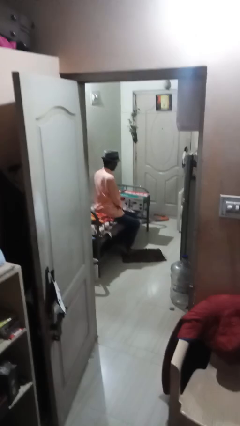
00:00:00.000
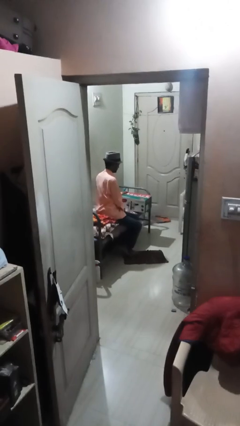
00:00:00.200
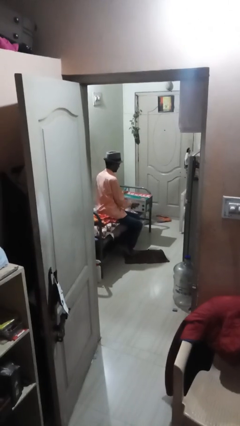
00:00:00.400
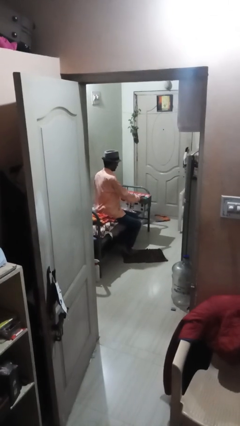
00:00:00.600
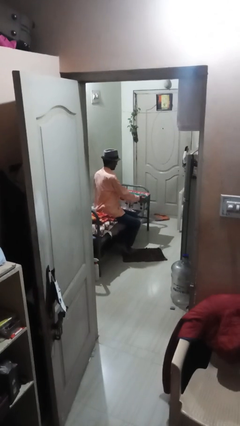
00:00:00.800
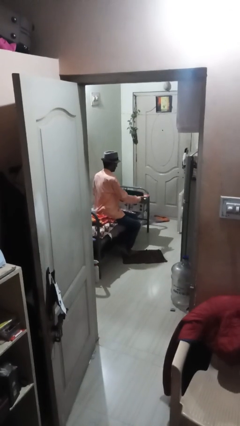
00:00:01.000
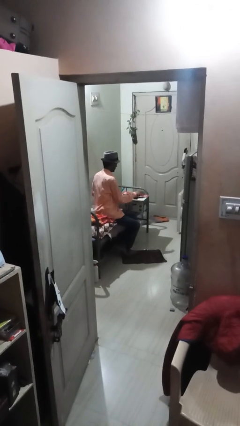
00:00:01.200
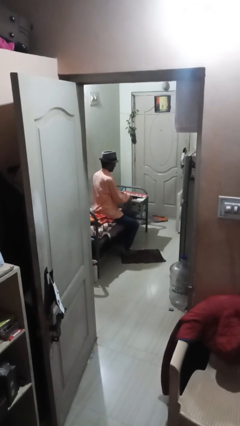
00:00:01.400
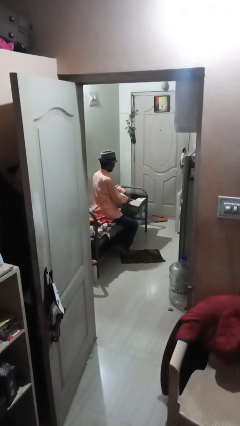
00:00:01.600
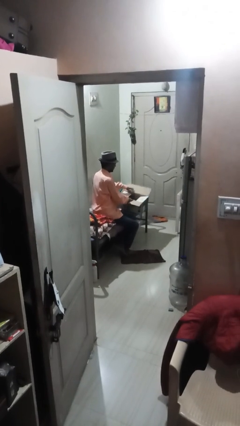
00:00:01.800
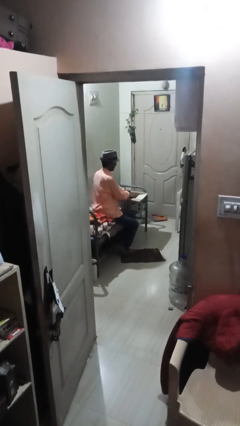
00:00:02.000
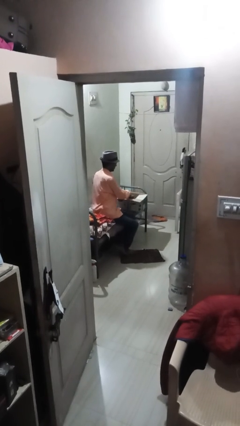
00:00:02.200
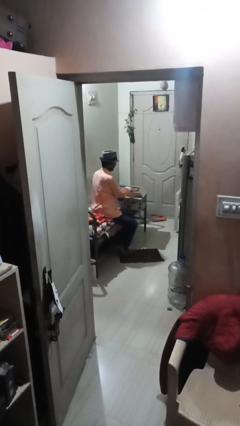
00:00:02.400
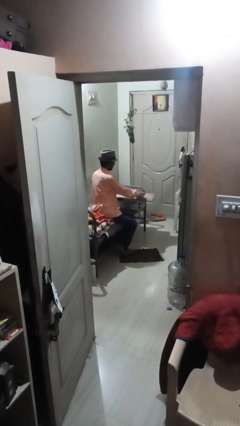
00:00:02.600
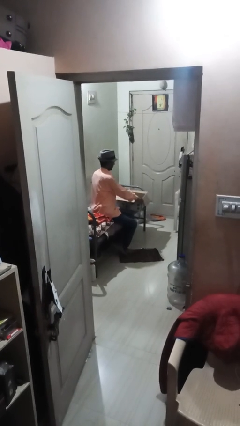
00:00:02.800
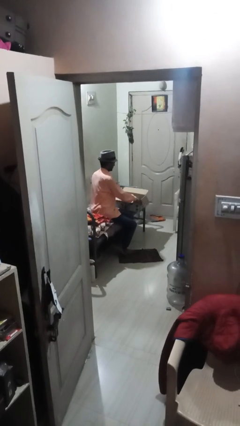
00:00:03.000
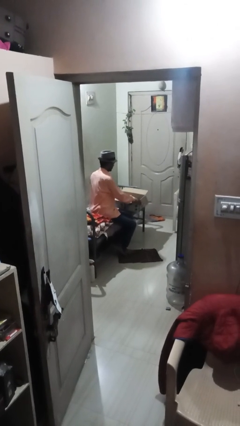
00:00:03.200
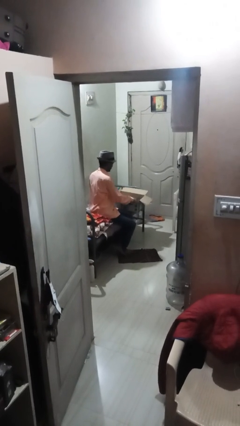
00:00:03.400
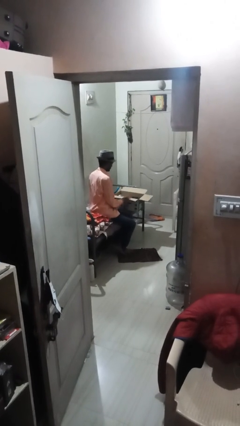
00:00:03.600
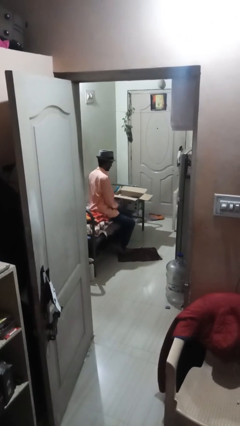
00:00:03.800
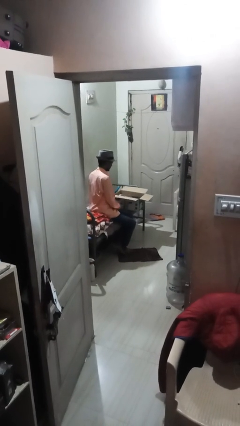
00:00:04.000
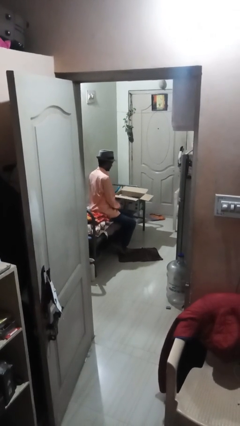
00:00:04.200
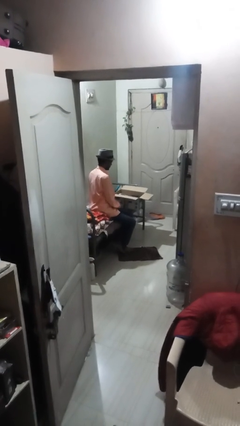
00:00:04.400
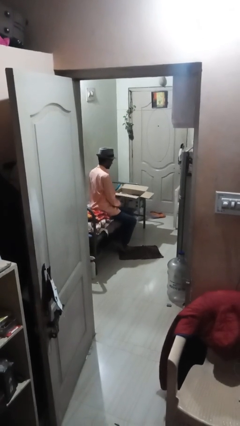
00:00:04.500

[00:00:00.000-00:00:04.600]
person opens box

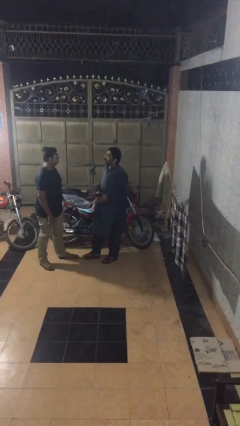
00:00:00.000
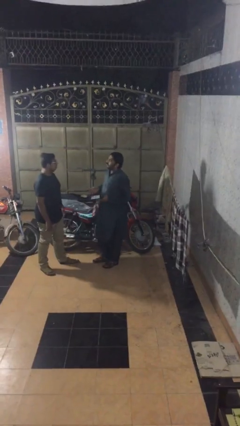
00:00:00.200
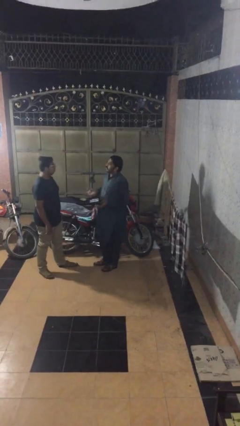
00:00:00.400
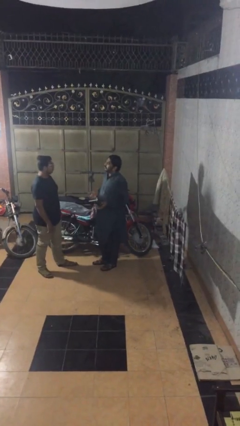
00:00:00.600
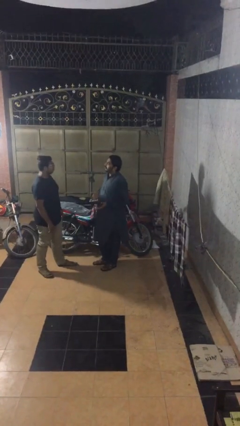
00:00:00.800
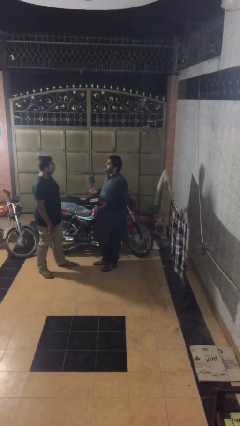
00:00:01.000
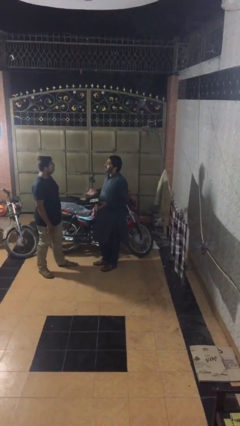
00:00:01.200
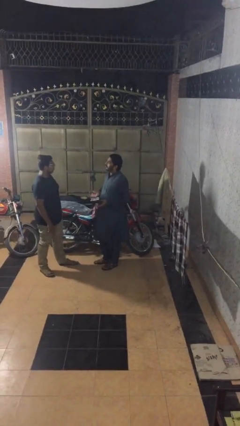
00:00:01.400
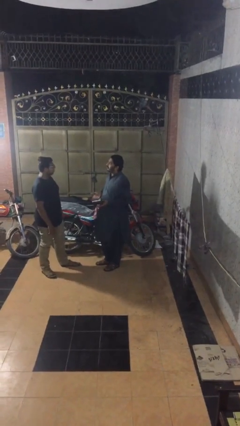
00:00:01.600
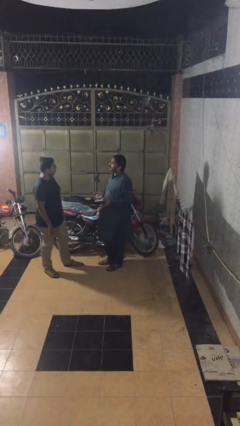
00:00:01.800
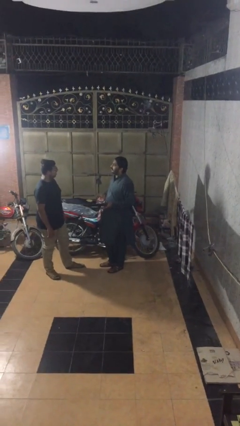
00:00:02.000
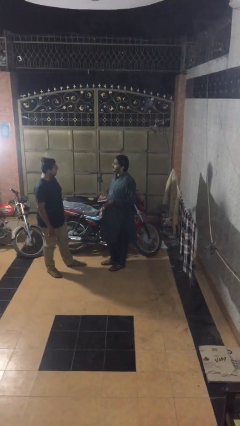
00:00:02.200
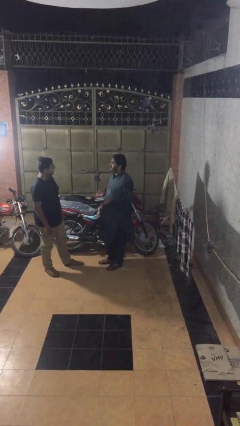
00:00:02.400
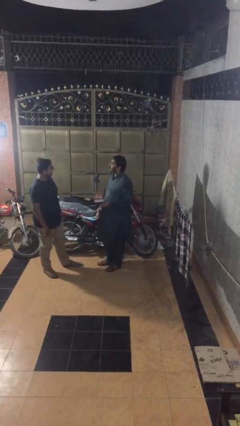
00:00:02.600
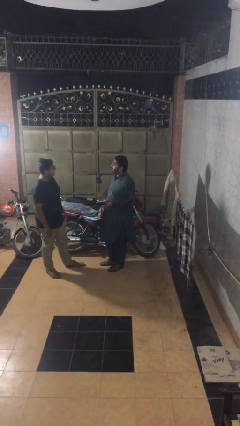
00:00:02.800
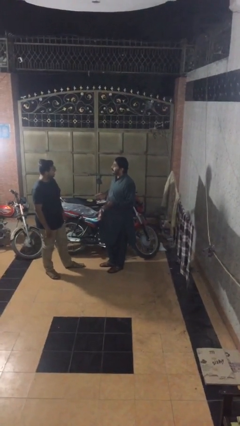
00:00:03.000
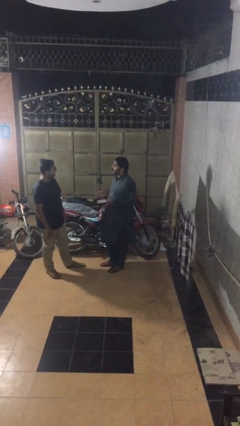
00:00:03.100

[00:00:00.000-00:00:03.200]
person talks to person

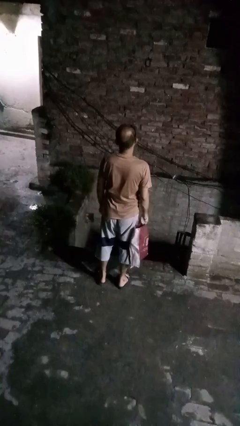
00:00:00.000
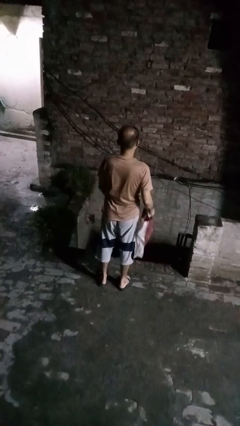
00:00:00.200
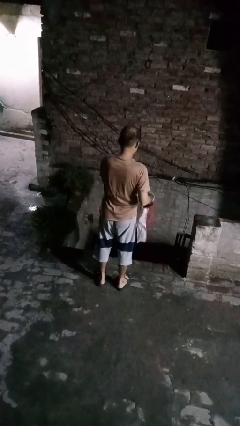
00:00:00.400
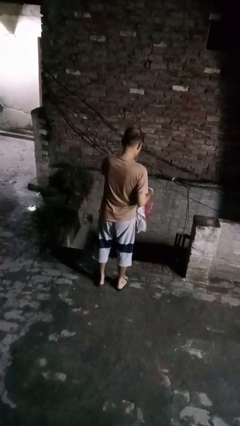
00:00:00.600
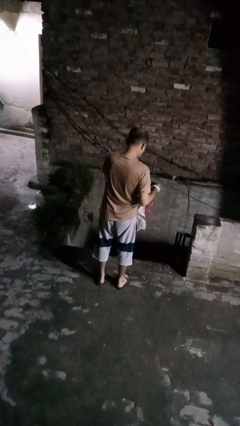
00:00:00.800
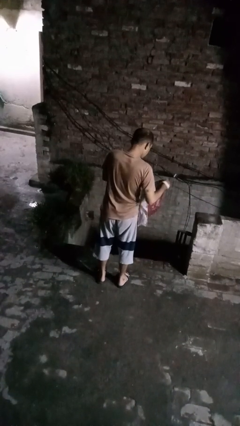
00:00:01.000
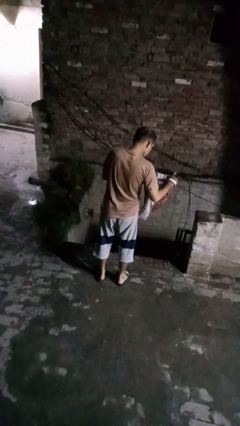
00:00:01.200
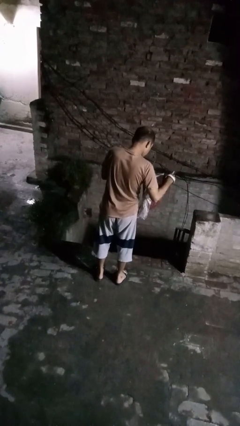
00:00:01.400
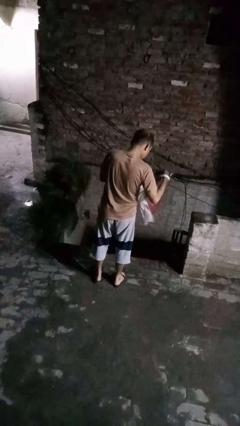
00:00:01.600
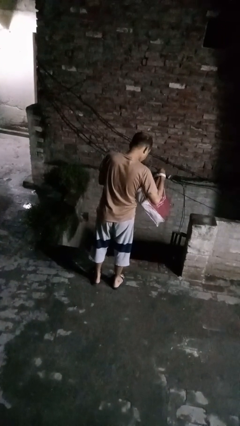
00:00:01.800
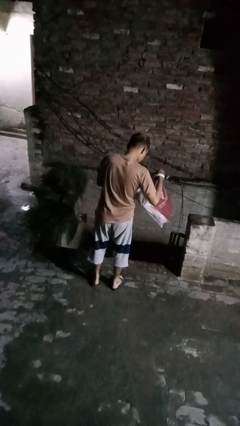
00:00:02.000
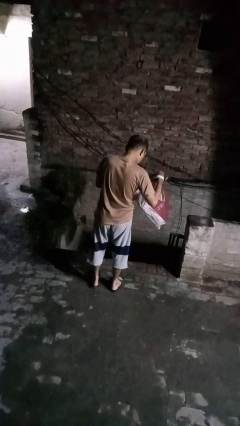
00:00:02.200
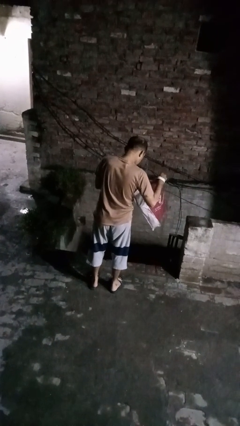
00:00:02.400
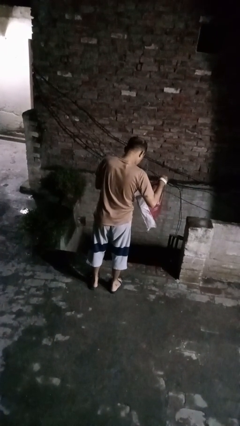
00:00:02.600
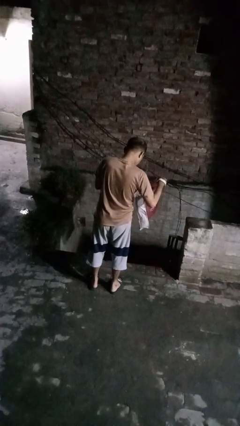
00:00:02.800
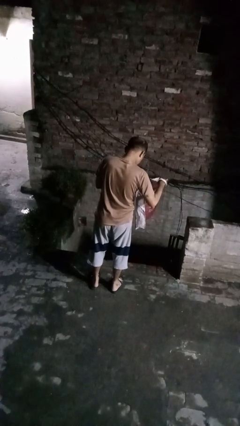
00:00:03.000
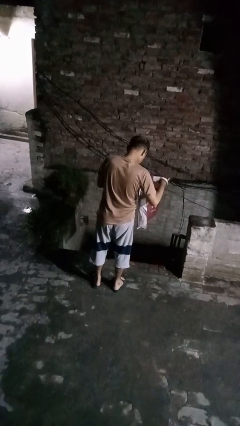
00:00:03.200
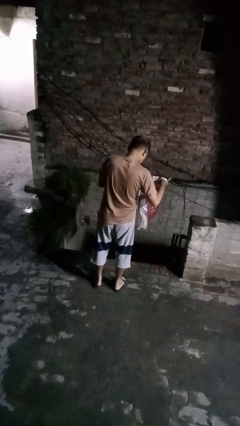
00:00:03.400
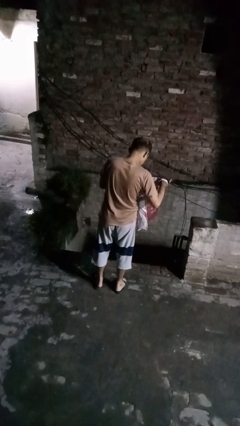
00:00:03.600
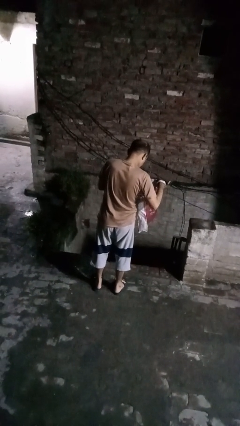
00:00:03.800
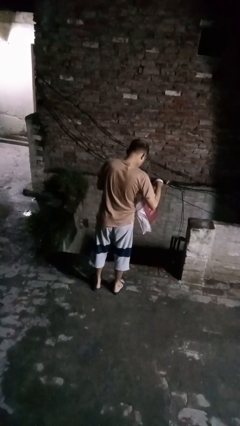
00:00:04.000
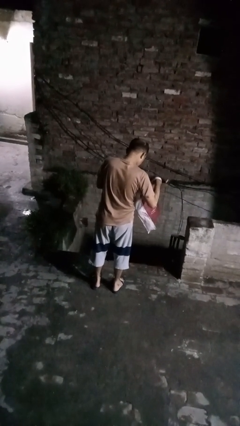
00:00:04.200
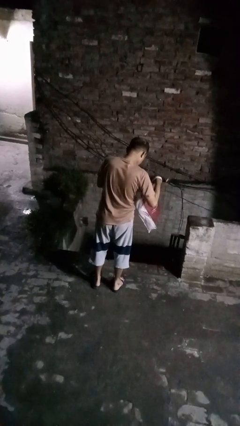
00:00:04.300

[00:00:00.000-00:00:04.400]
person searches in bag

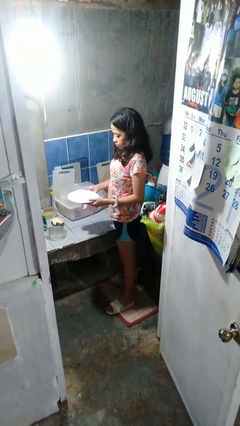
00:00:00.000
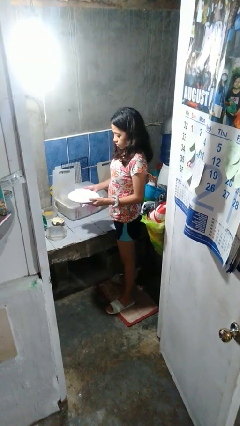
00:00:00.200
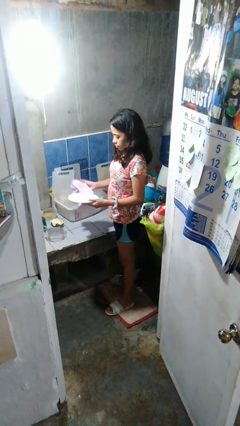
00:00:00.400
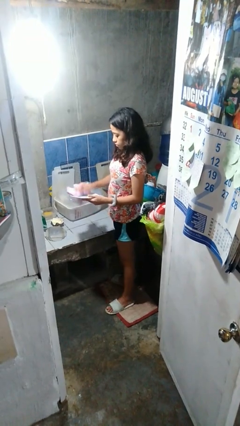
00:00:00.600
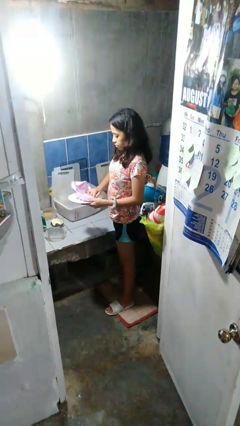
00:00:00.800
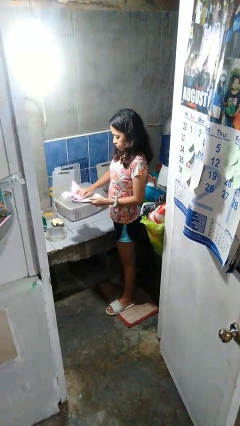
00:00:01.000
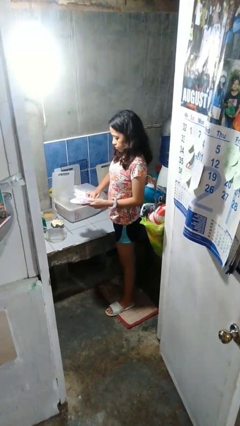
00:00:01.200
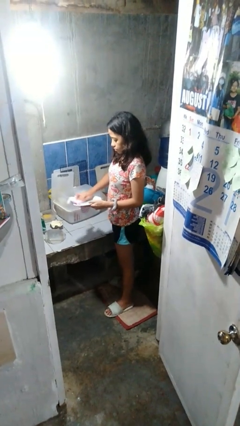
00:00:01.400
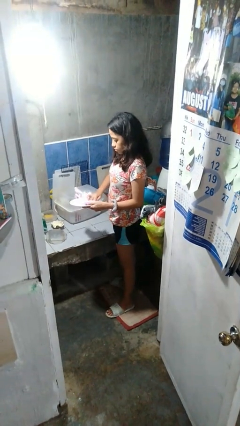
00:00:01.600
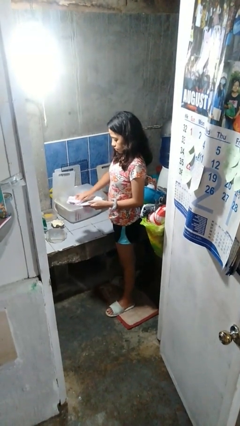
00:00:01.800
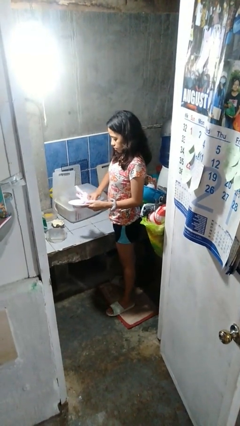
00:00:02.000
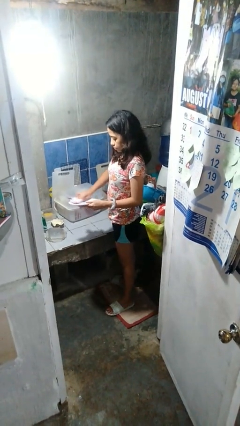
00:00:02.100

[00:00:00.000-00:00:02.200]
person dries dish

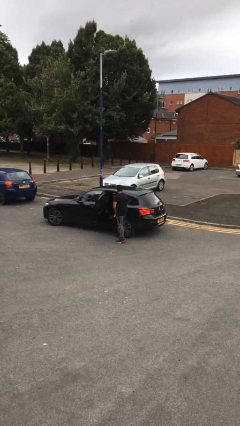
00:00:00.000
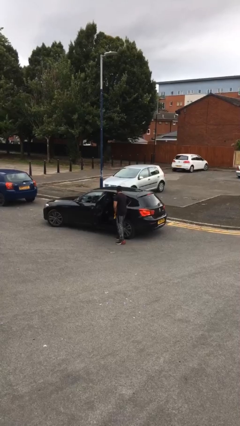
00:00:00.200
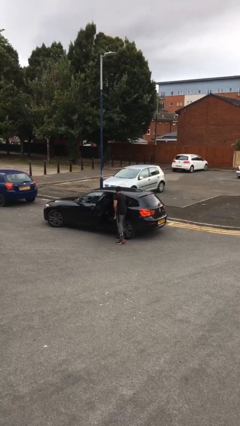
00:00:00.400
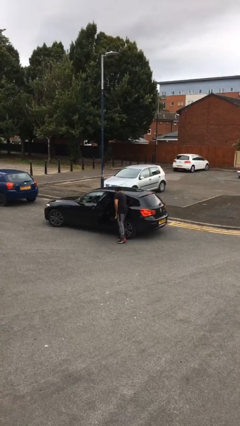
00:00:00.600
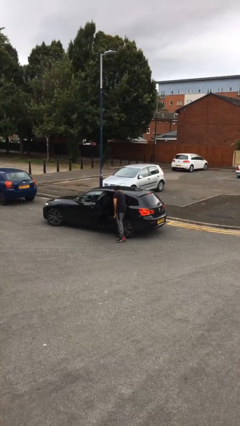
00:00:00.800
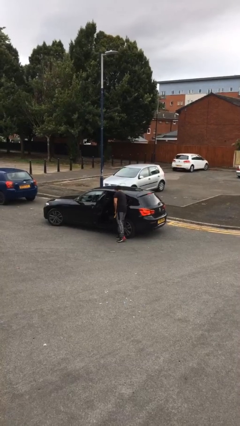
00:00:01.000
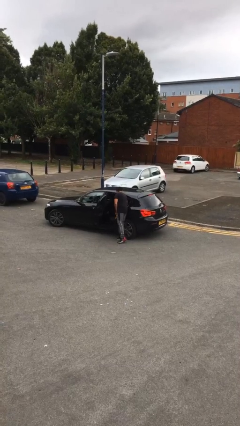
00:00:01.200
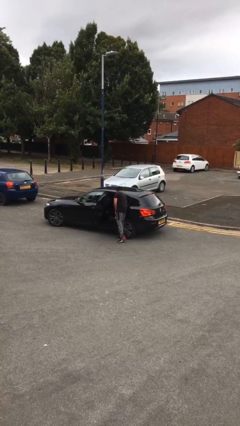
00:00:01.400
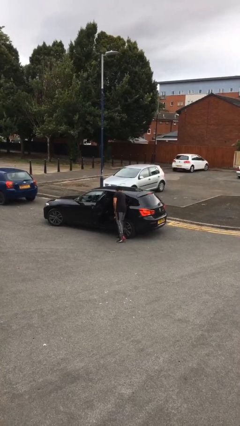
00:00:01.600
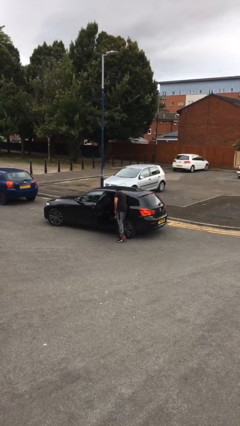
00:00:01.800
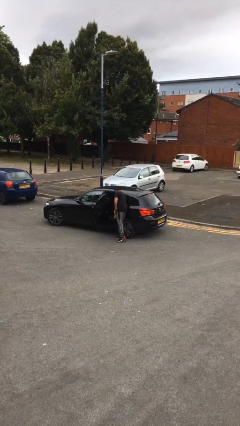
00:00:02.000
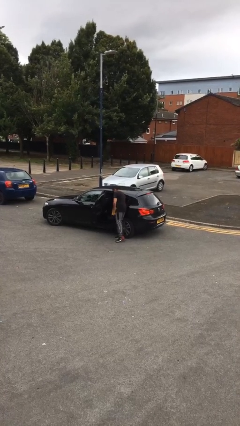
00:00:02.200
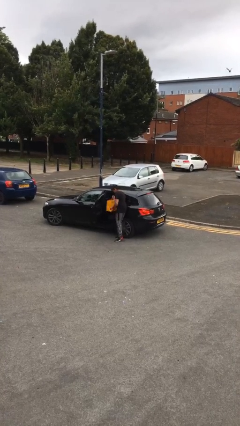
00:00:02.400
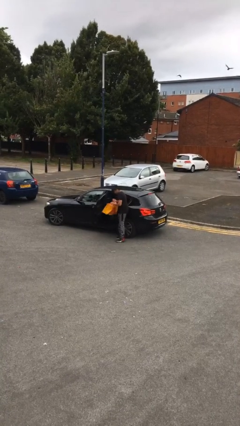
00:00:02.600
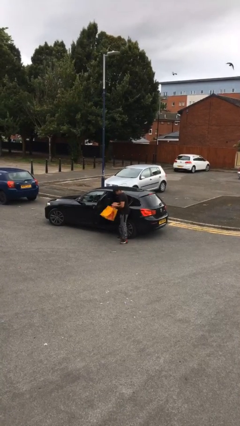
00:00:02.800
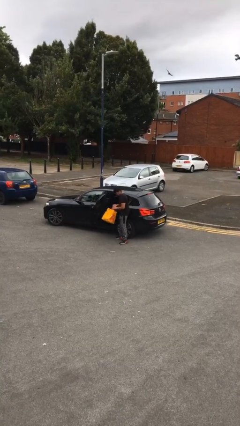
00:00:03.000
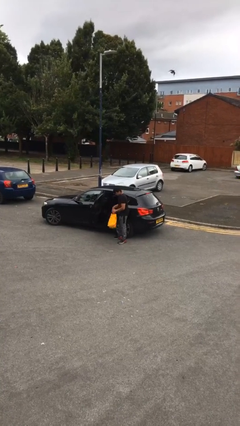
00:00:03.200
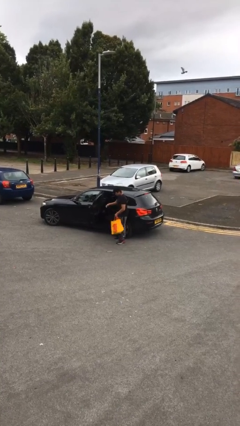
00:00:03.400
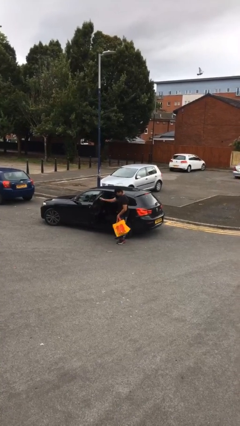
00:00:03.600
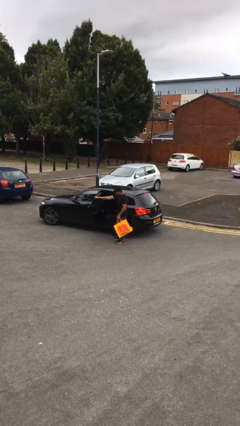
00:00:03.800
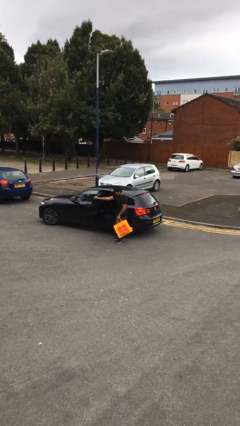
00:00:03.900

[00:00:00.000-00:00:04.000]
person unloads car
